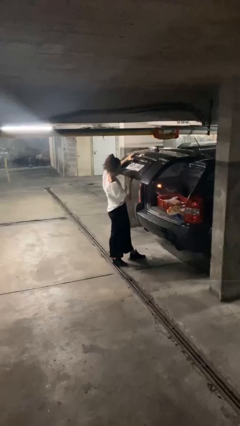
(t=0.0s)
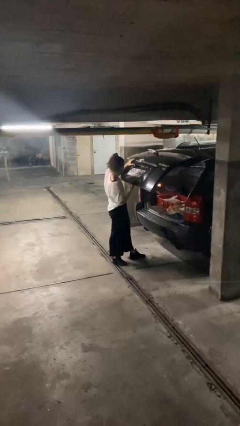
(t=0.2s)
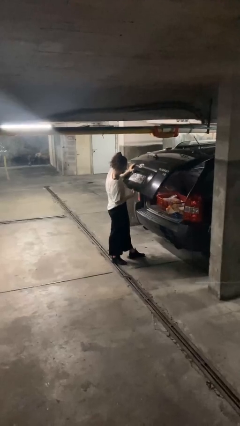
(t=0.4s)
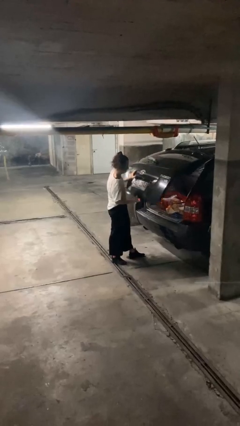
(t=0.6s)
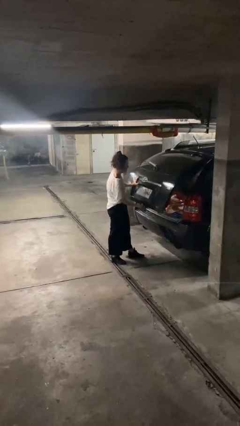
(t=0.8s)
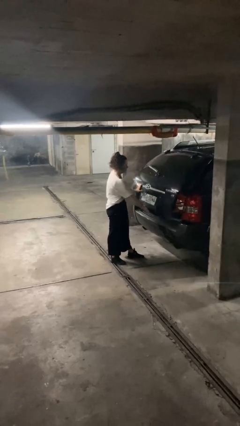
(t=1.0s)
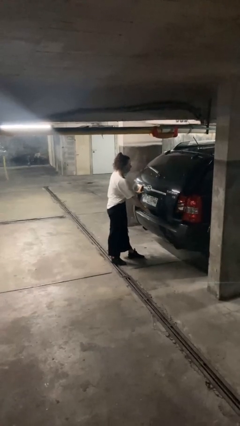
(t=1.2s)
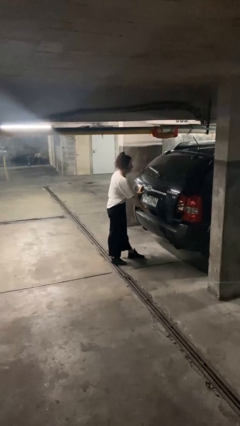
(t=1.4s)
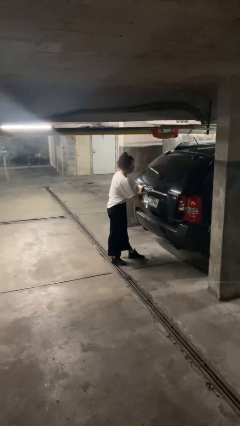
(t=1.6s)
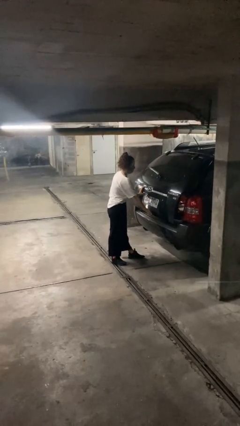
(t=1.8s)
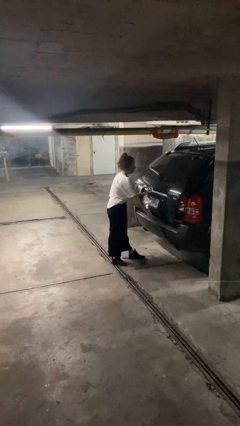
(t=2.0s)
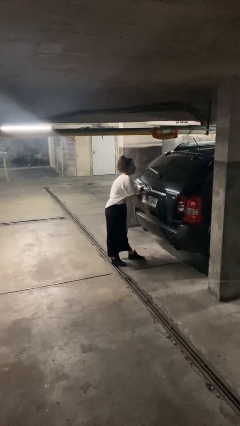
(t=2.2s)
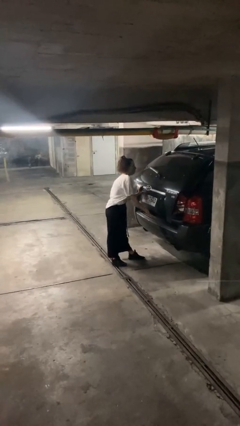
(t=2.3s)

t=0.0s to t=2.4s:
person closes car trunk

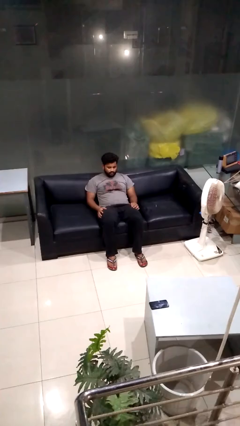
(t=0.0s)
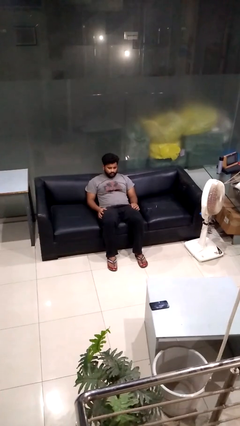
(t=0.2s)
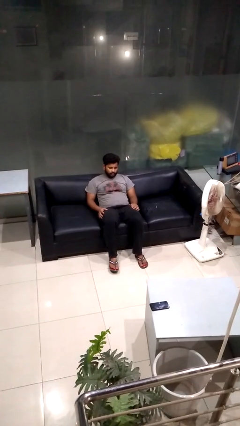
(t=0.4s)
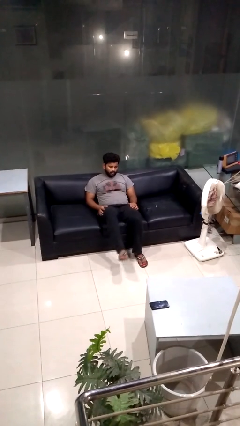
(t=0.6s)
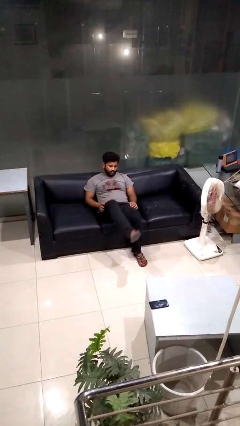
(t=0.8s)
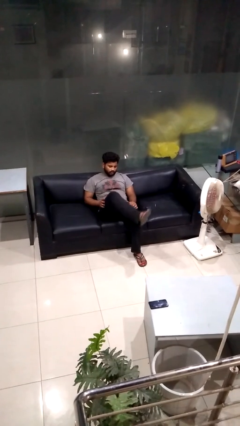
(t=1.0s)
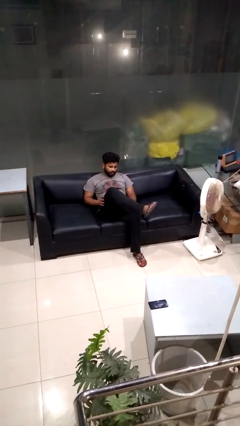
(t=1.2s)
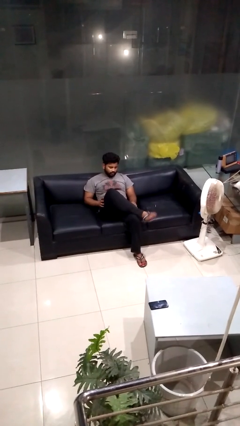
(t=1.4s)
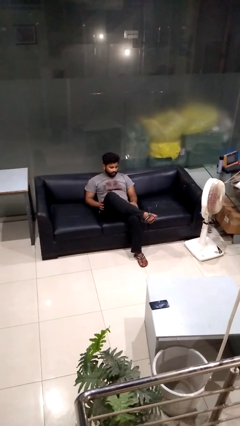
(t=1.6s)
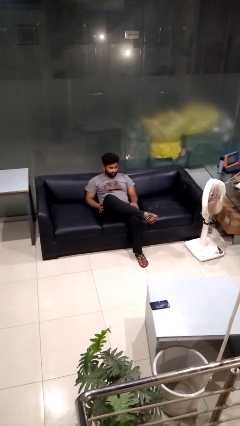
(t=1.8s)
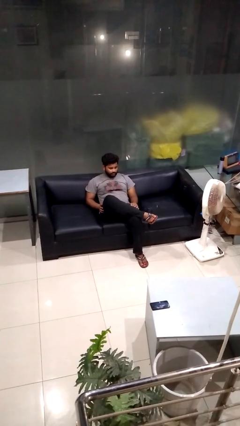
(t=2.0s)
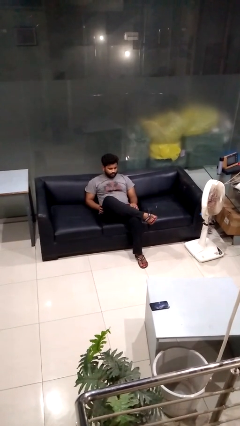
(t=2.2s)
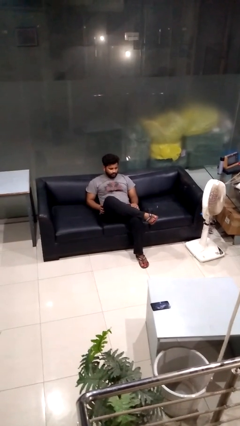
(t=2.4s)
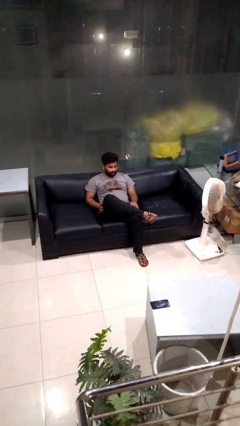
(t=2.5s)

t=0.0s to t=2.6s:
person crosses legs

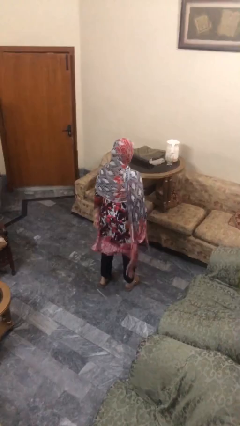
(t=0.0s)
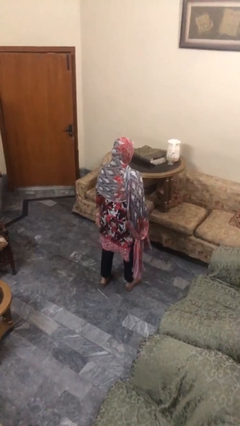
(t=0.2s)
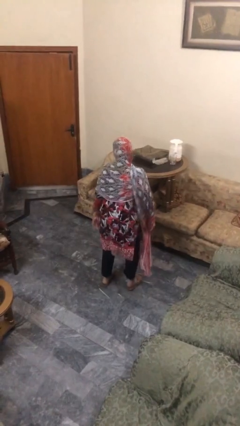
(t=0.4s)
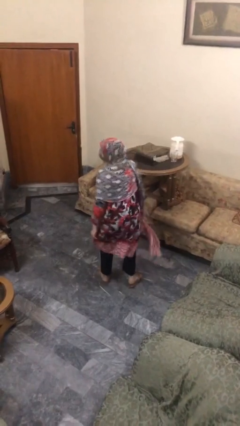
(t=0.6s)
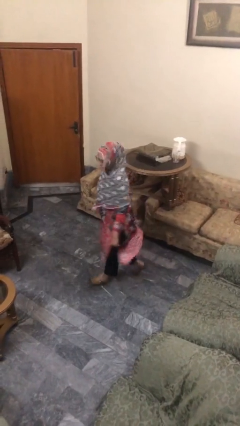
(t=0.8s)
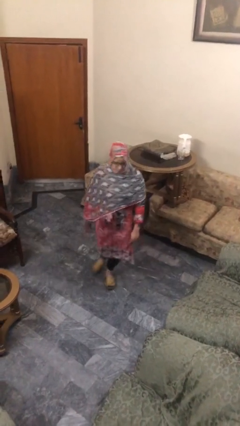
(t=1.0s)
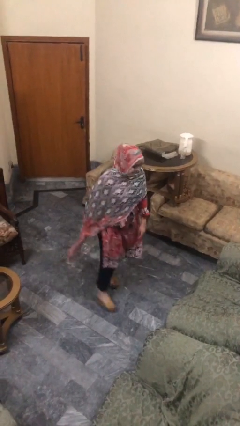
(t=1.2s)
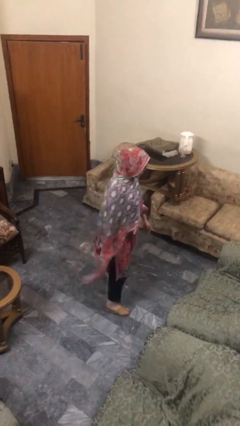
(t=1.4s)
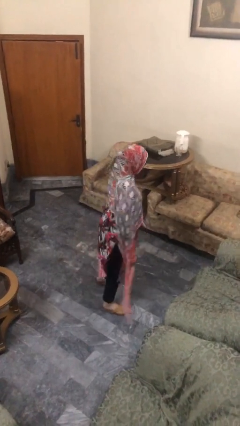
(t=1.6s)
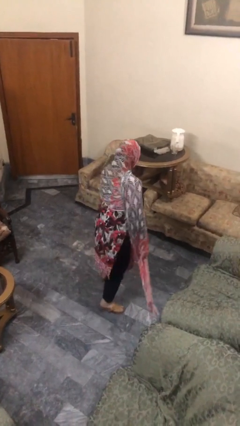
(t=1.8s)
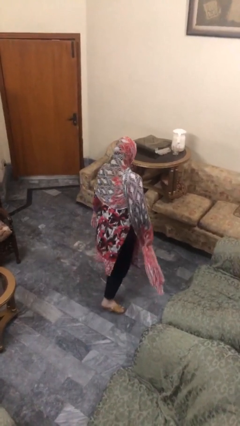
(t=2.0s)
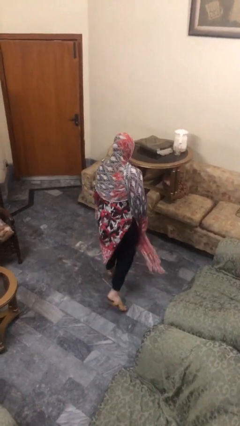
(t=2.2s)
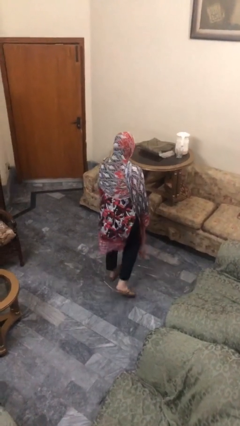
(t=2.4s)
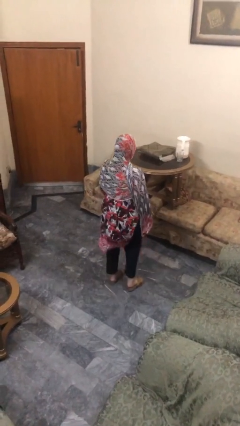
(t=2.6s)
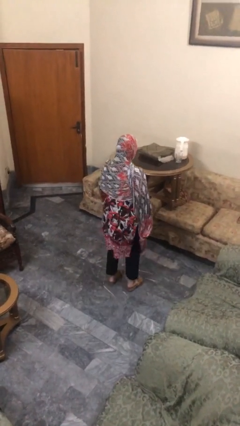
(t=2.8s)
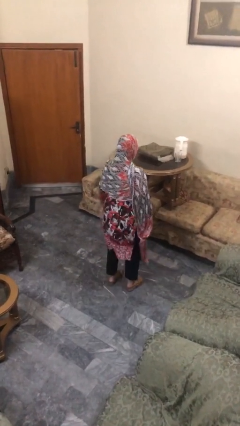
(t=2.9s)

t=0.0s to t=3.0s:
person twirls

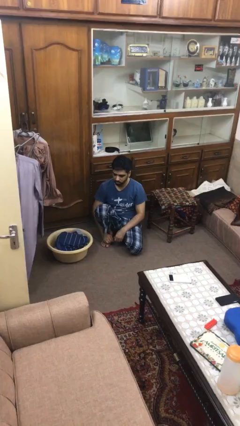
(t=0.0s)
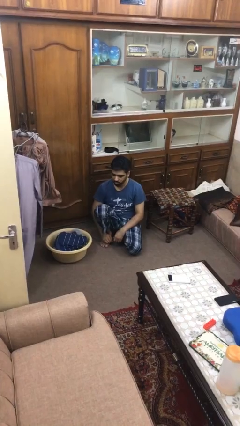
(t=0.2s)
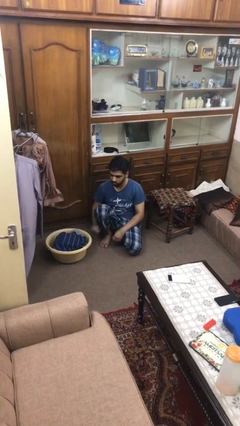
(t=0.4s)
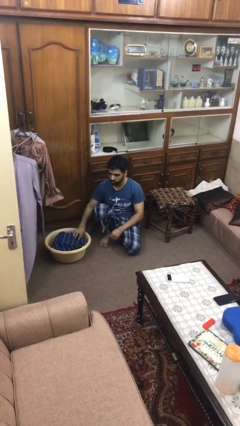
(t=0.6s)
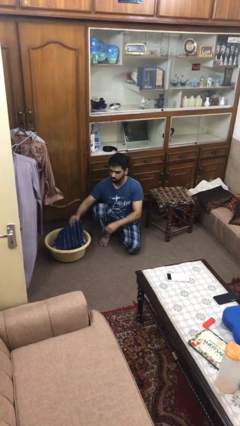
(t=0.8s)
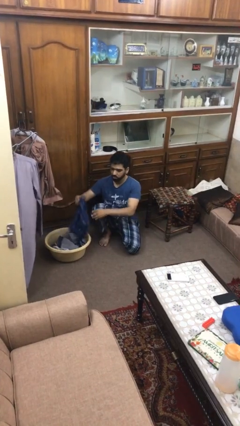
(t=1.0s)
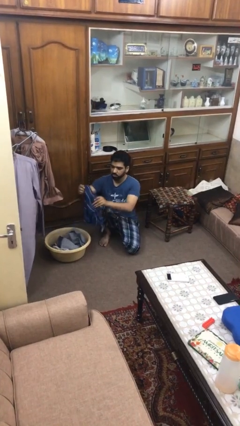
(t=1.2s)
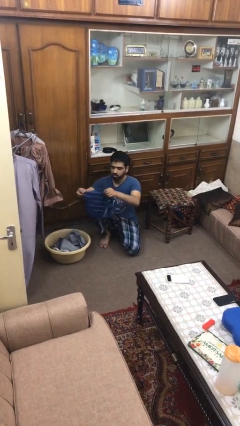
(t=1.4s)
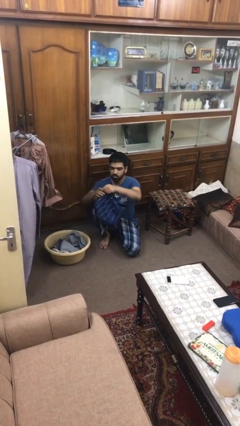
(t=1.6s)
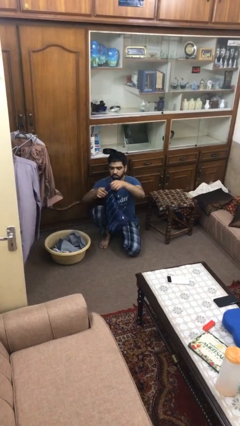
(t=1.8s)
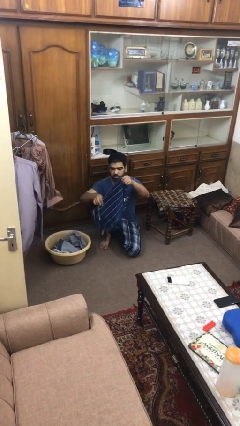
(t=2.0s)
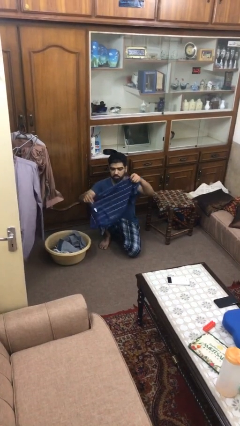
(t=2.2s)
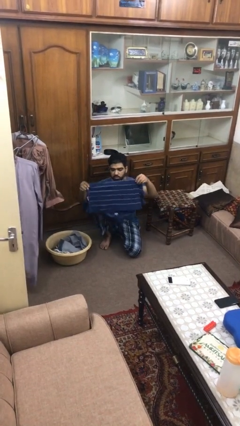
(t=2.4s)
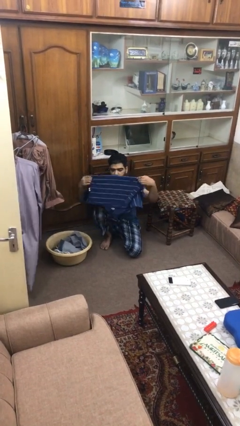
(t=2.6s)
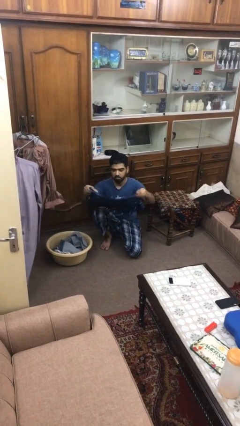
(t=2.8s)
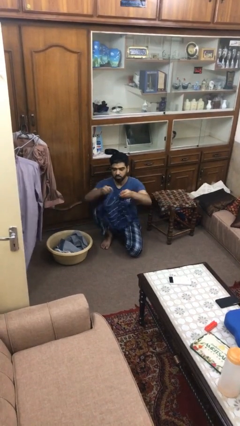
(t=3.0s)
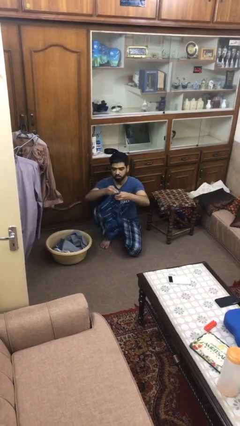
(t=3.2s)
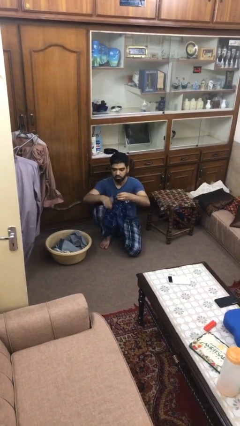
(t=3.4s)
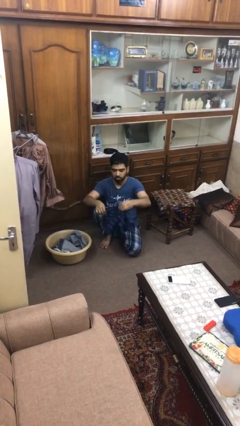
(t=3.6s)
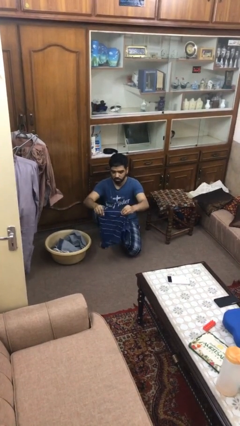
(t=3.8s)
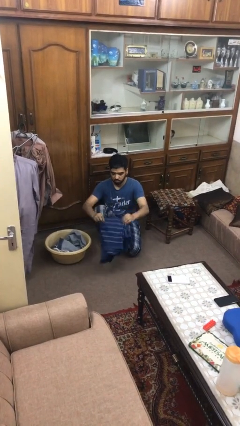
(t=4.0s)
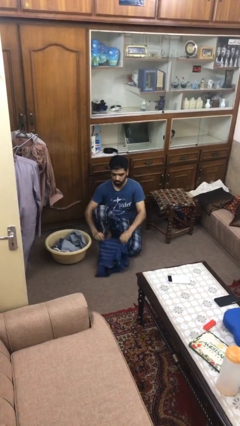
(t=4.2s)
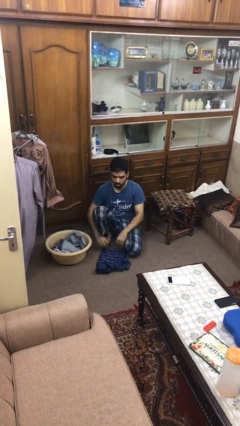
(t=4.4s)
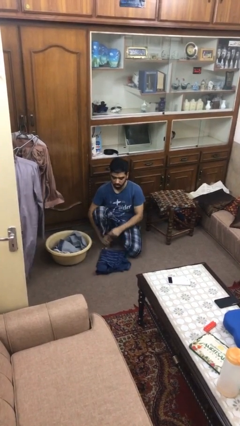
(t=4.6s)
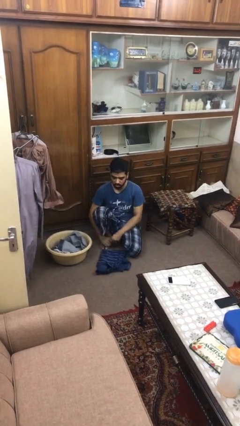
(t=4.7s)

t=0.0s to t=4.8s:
person folds shirt

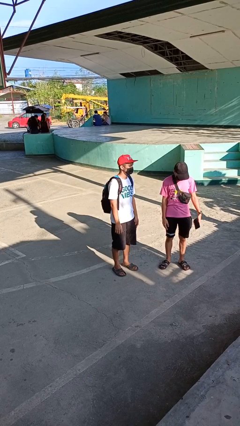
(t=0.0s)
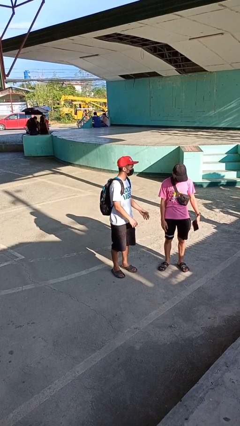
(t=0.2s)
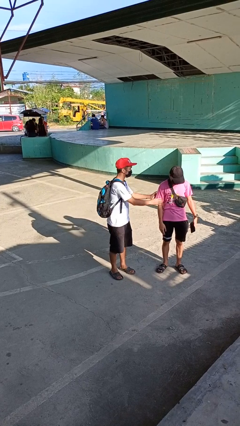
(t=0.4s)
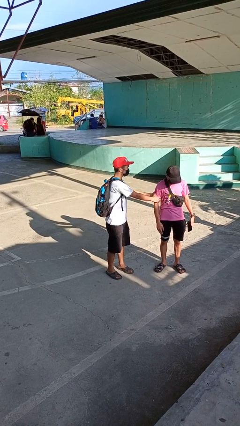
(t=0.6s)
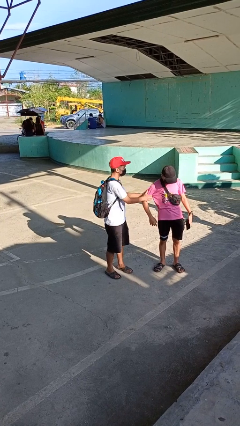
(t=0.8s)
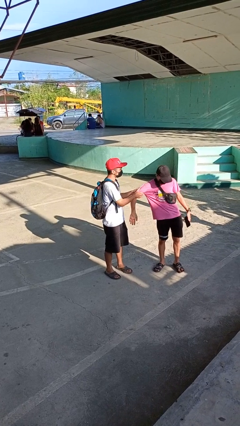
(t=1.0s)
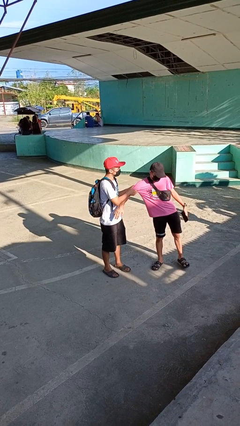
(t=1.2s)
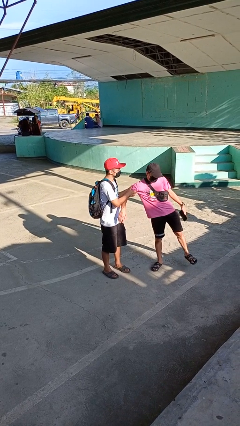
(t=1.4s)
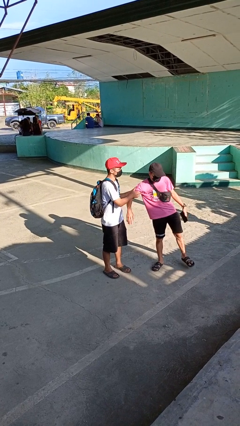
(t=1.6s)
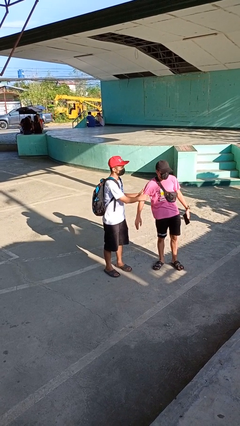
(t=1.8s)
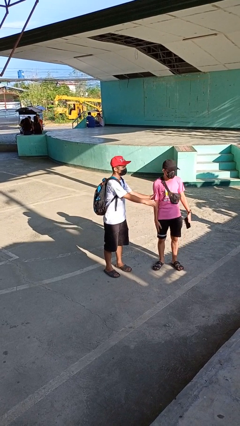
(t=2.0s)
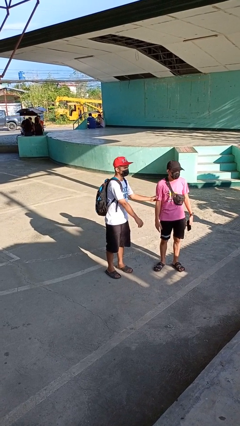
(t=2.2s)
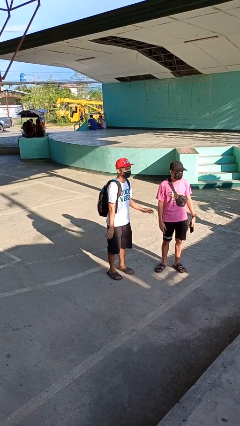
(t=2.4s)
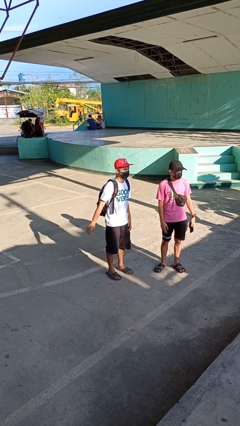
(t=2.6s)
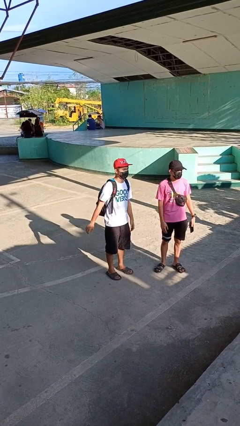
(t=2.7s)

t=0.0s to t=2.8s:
person grabs person by bicep

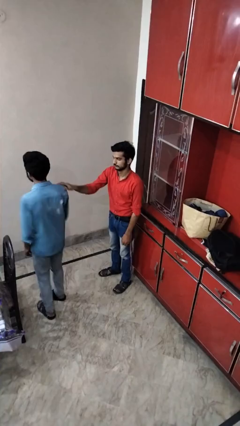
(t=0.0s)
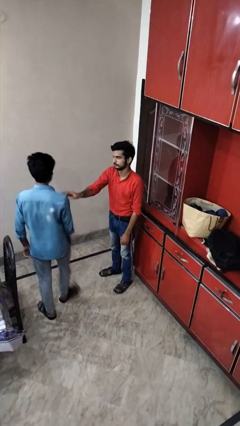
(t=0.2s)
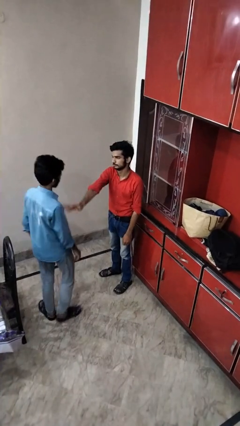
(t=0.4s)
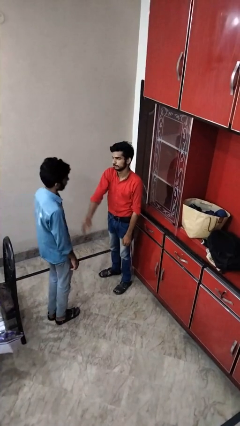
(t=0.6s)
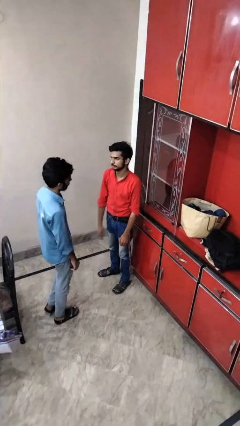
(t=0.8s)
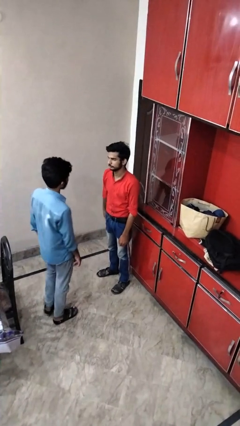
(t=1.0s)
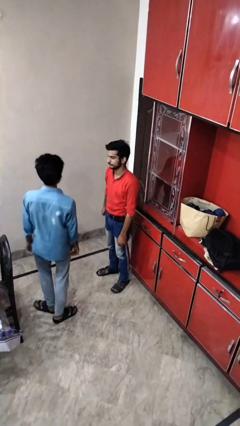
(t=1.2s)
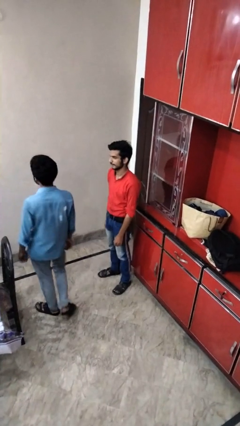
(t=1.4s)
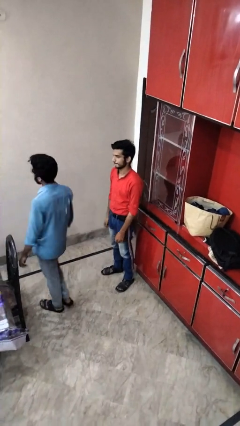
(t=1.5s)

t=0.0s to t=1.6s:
person spins person around

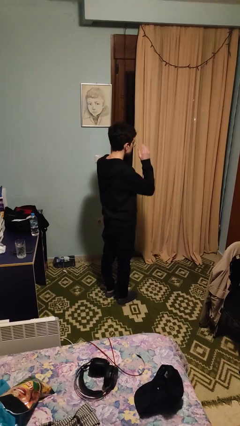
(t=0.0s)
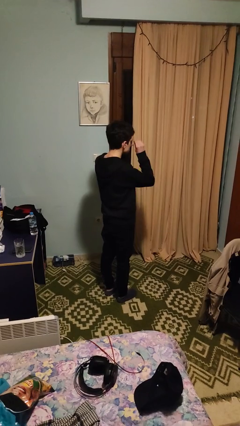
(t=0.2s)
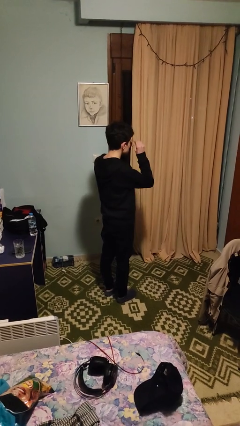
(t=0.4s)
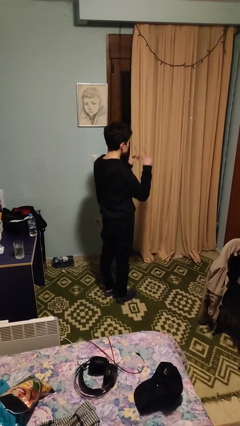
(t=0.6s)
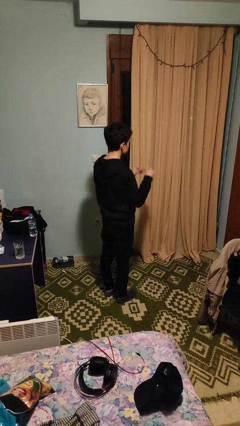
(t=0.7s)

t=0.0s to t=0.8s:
person takes off glasses
